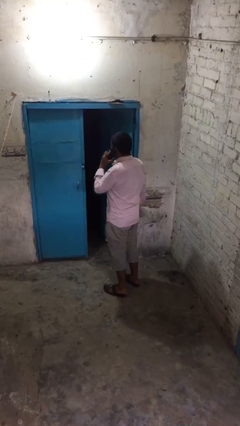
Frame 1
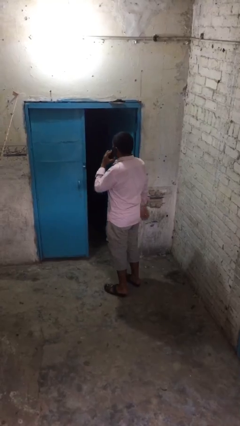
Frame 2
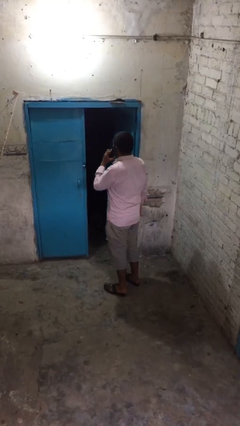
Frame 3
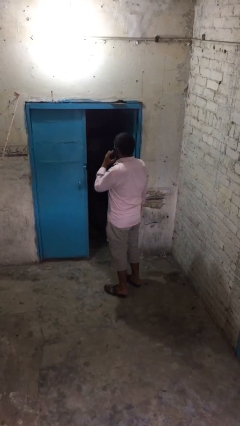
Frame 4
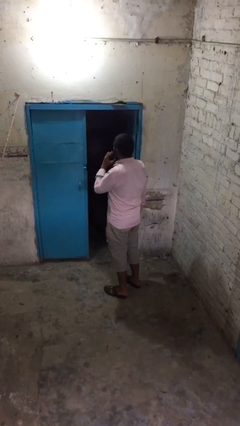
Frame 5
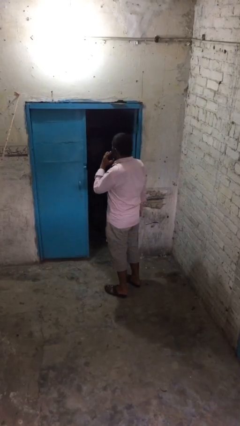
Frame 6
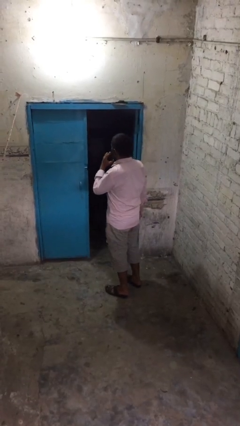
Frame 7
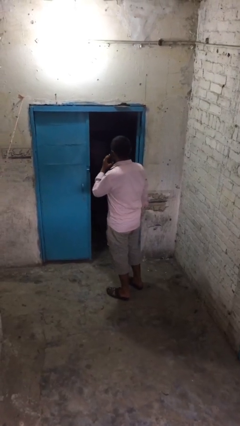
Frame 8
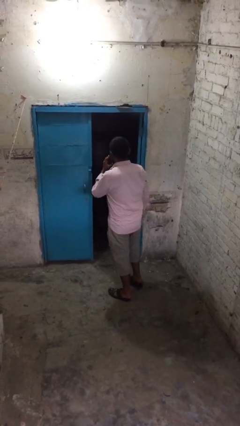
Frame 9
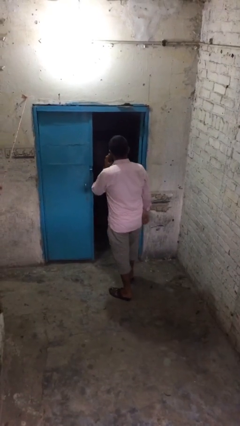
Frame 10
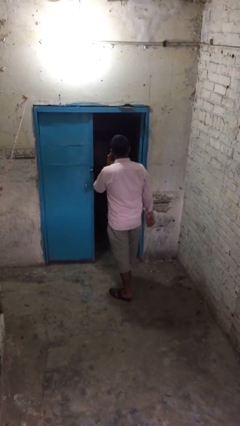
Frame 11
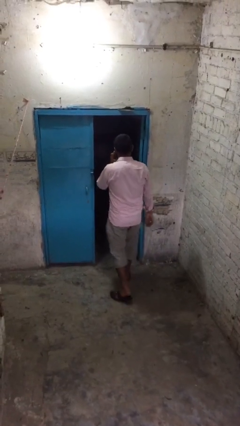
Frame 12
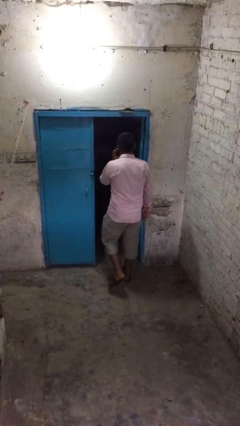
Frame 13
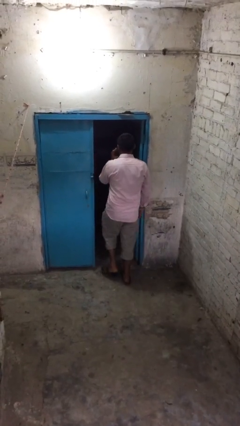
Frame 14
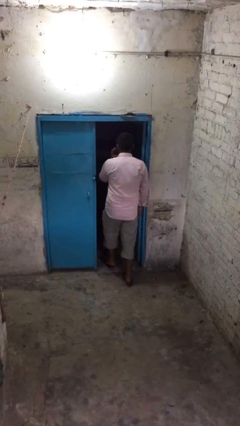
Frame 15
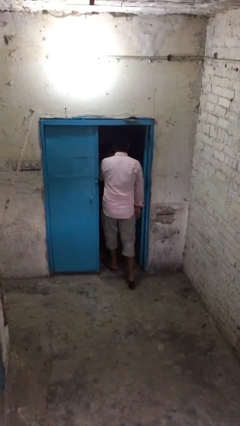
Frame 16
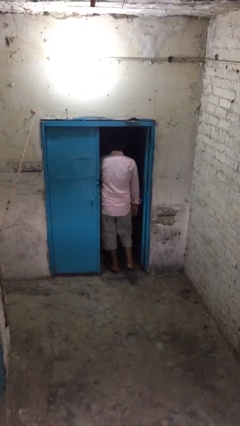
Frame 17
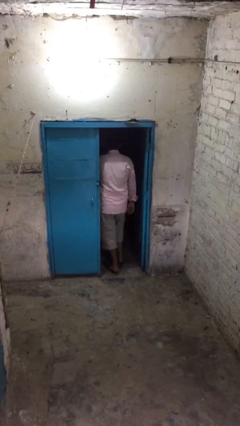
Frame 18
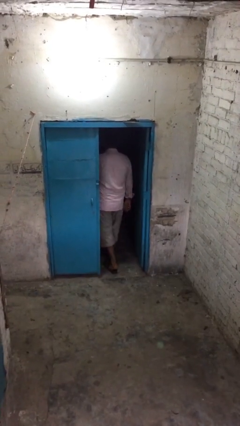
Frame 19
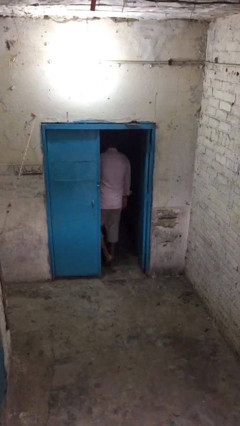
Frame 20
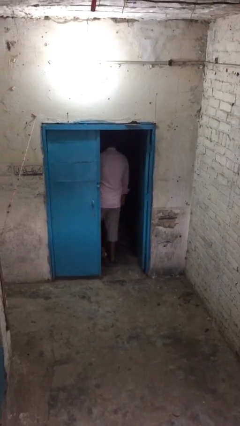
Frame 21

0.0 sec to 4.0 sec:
person exits scene through structure

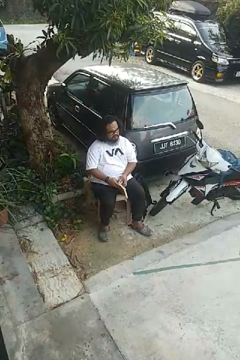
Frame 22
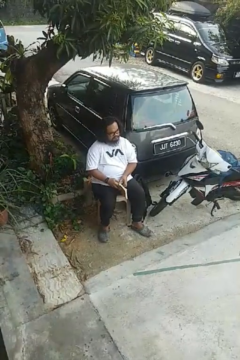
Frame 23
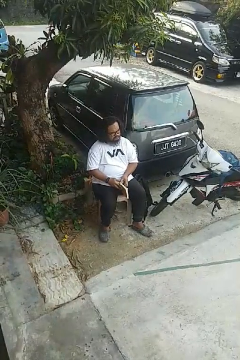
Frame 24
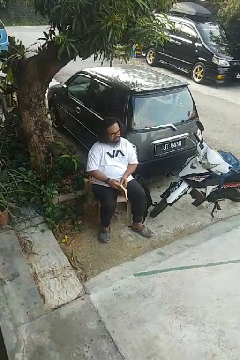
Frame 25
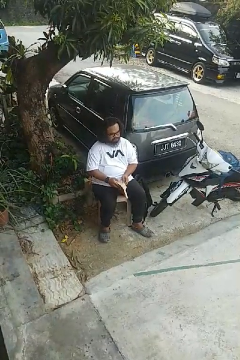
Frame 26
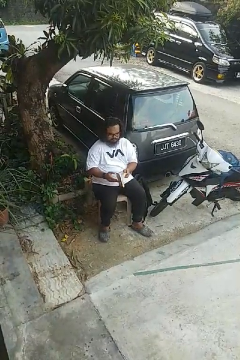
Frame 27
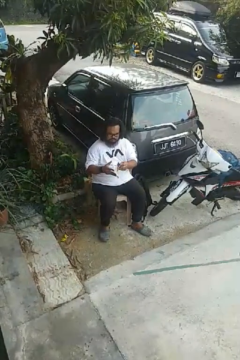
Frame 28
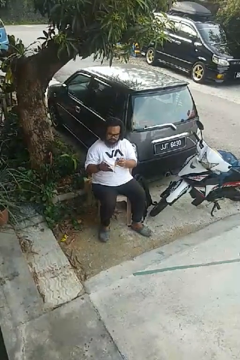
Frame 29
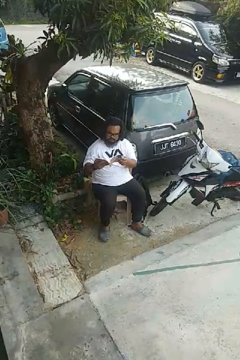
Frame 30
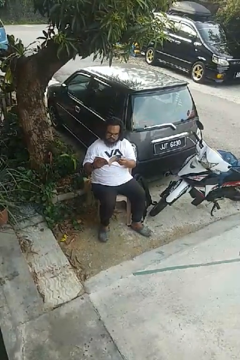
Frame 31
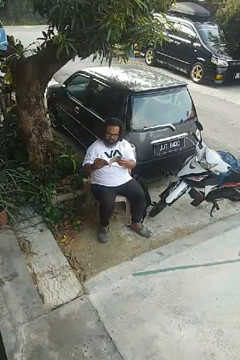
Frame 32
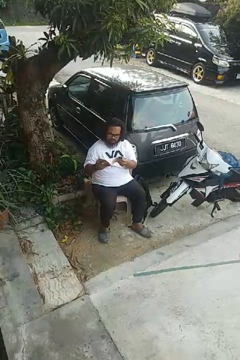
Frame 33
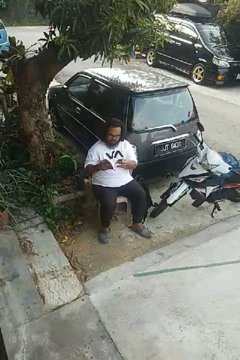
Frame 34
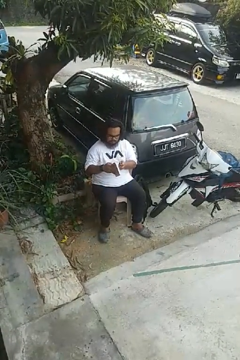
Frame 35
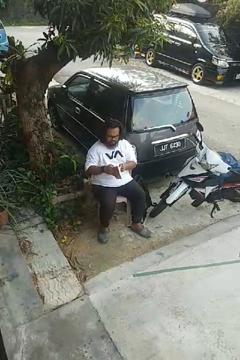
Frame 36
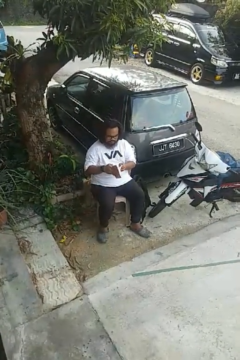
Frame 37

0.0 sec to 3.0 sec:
person reads book

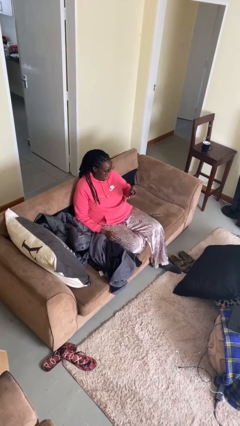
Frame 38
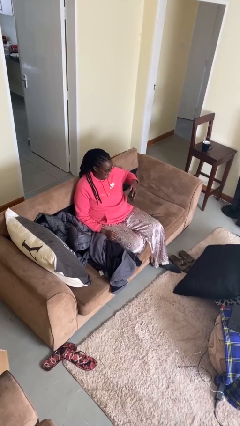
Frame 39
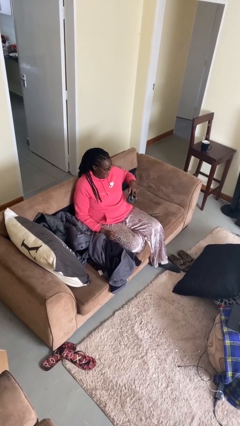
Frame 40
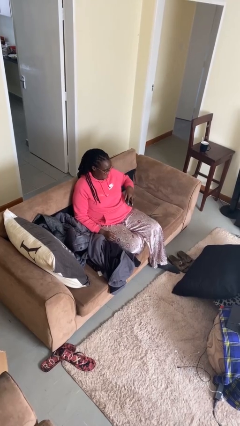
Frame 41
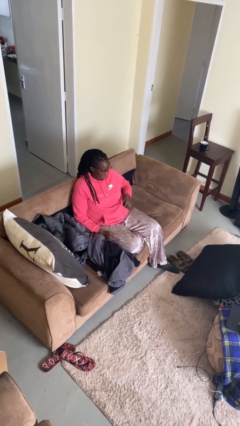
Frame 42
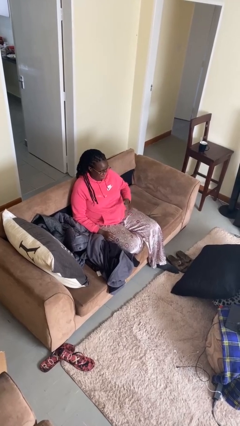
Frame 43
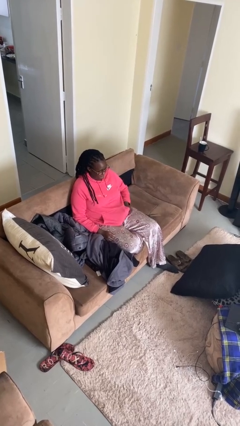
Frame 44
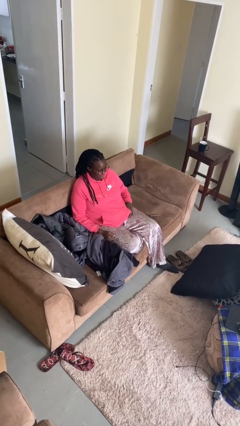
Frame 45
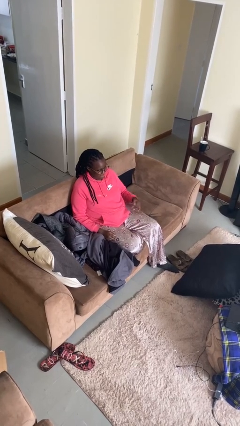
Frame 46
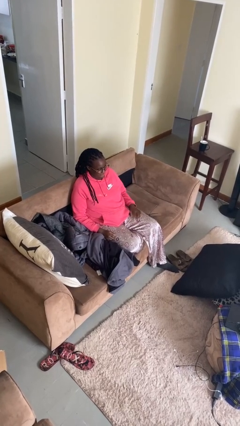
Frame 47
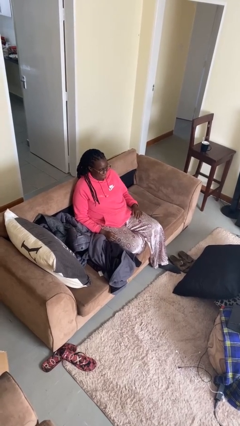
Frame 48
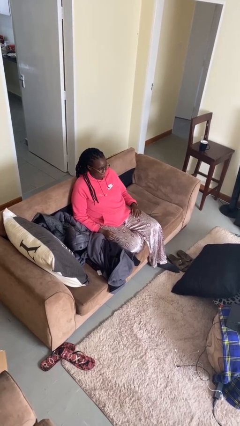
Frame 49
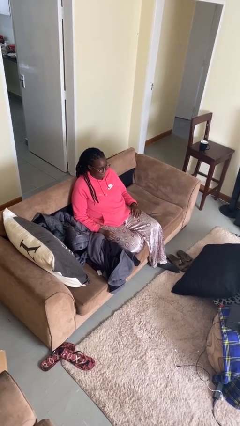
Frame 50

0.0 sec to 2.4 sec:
person puts phone into pocket

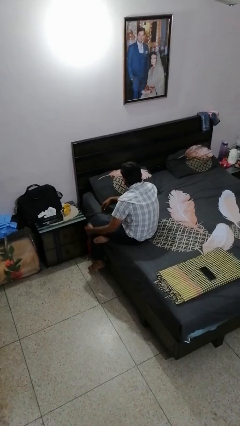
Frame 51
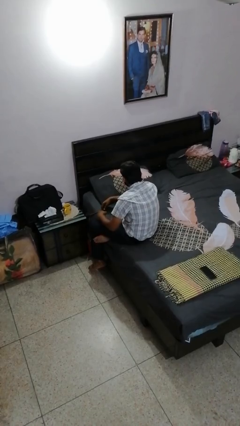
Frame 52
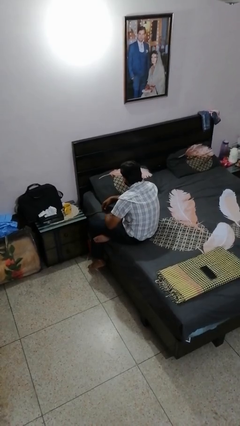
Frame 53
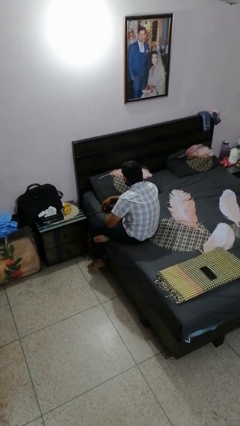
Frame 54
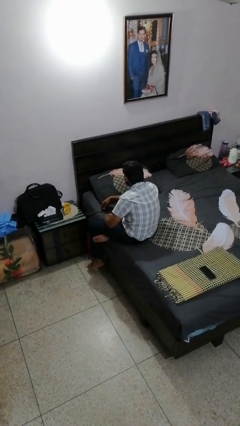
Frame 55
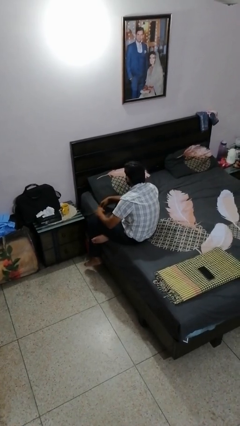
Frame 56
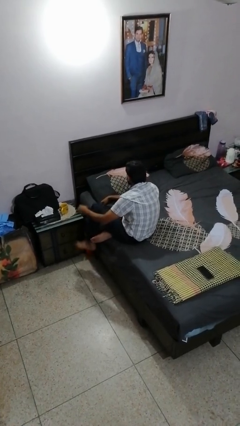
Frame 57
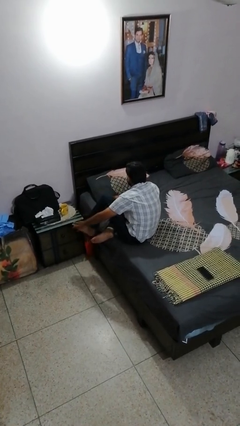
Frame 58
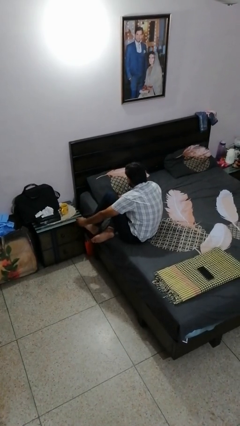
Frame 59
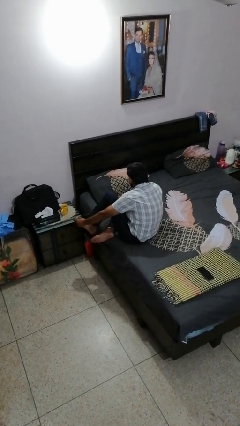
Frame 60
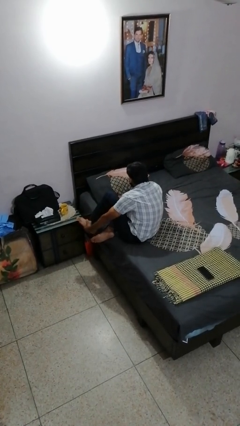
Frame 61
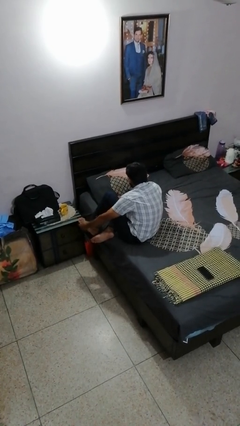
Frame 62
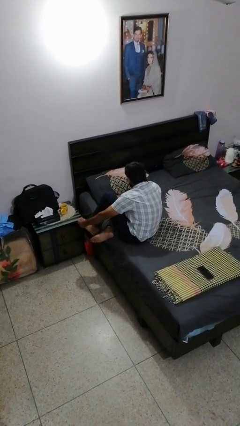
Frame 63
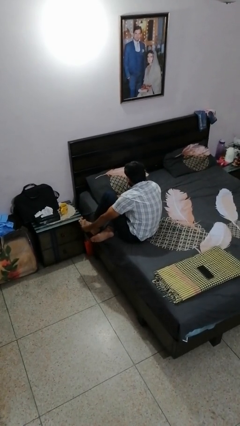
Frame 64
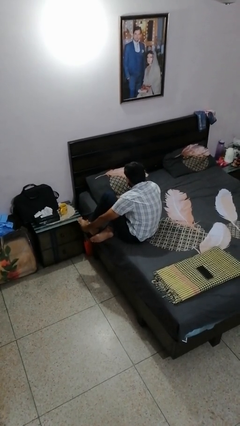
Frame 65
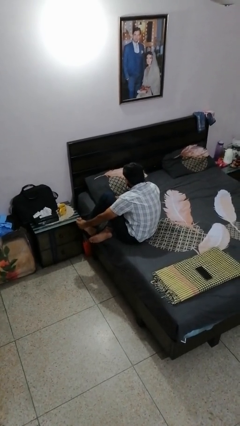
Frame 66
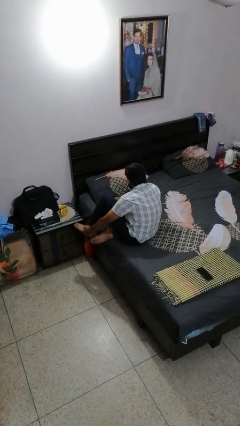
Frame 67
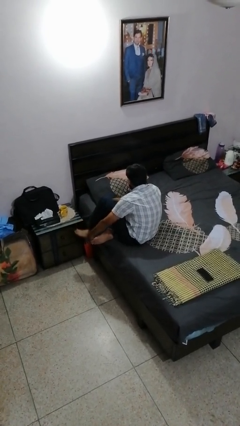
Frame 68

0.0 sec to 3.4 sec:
person rubs foot

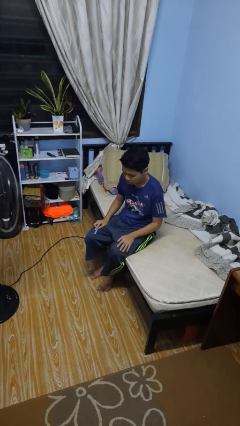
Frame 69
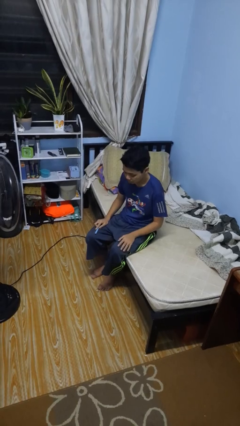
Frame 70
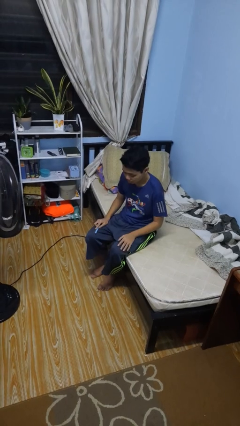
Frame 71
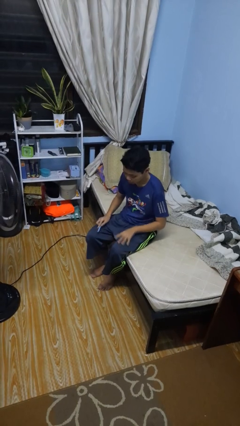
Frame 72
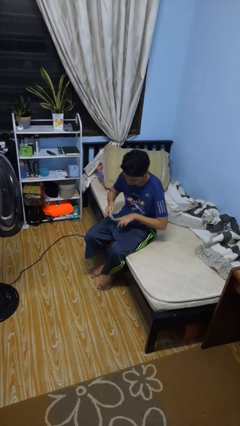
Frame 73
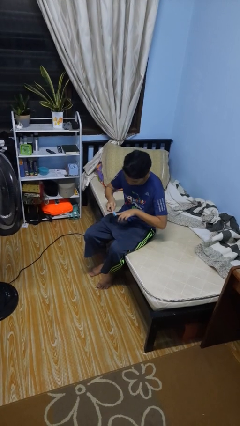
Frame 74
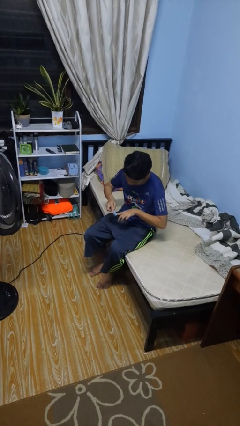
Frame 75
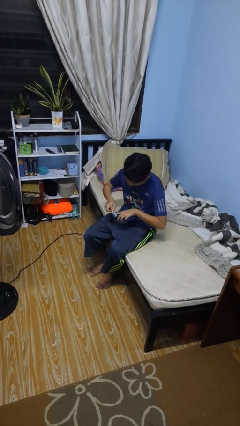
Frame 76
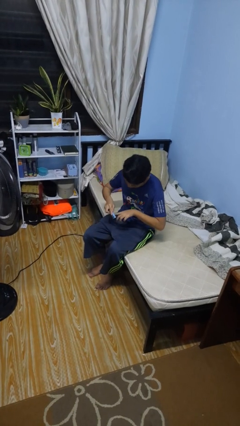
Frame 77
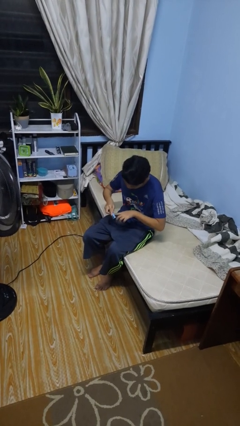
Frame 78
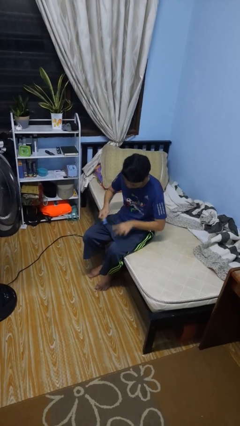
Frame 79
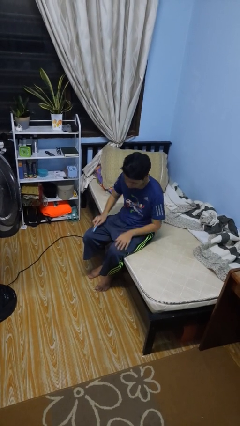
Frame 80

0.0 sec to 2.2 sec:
person files fingernails

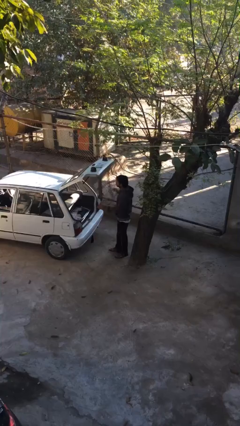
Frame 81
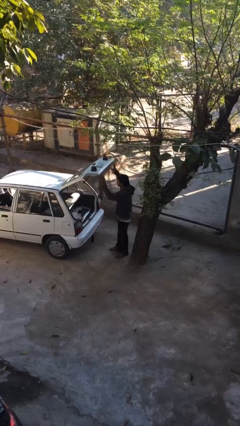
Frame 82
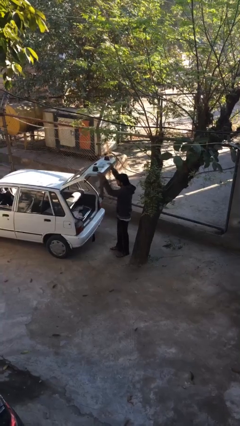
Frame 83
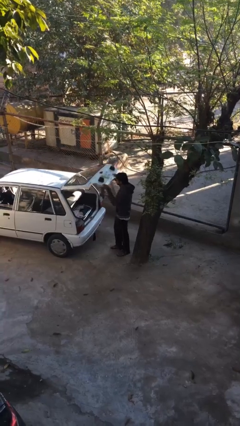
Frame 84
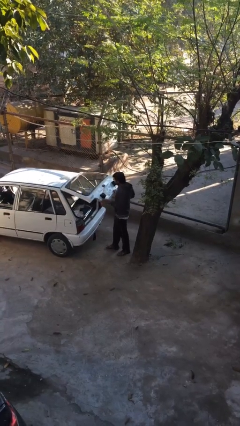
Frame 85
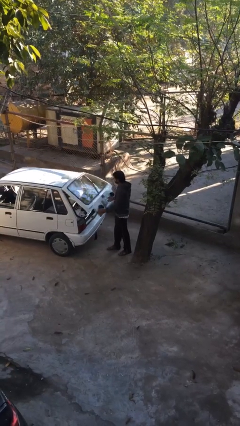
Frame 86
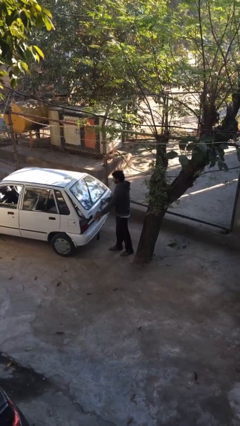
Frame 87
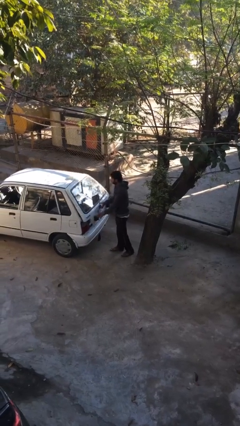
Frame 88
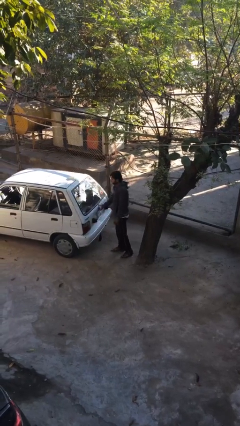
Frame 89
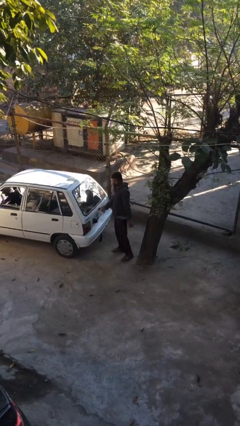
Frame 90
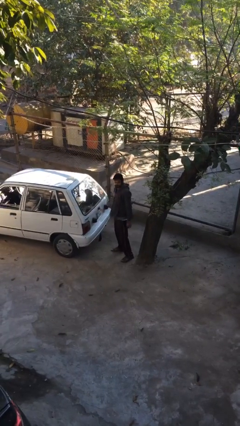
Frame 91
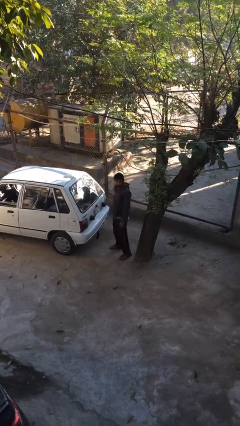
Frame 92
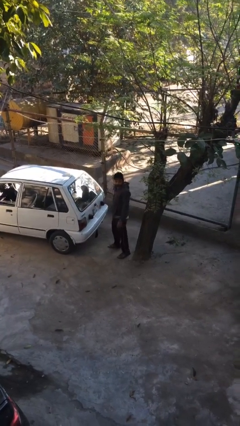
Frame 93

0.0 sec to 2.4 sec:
person closes car trunk
